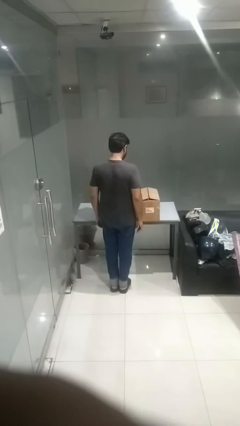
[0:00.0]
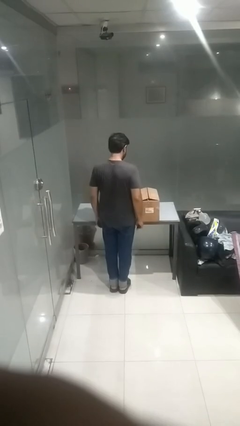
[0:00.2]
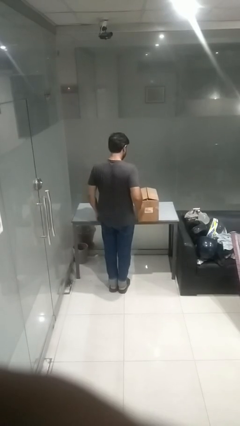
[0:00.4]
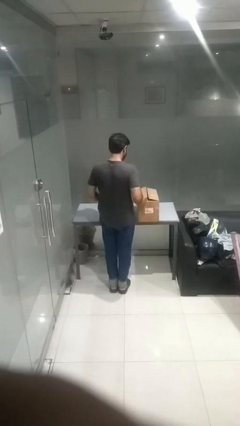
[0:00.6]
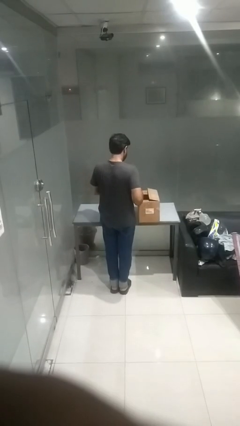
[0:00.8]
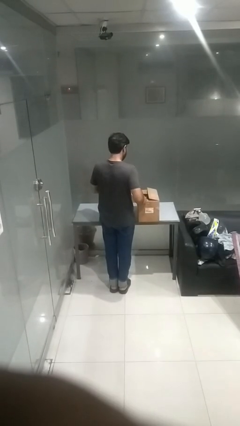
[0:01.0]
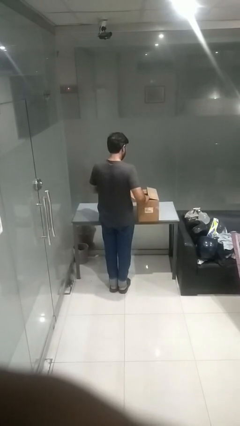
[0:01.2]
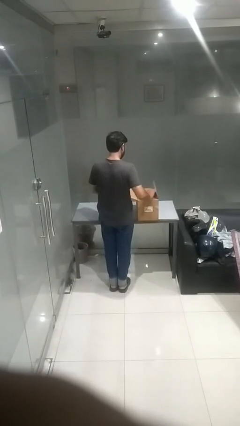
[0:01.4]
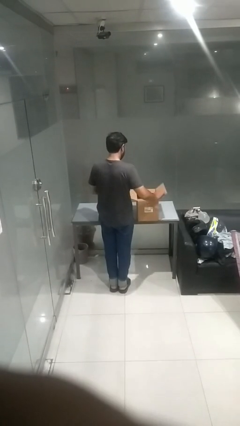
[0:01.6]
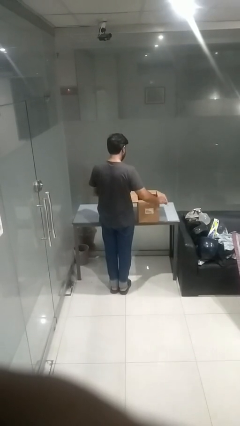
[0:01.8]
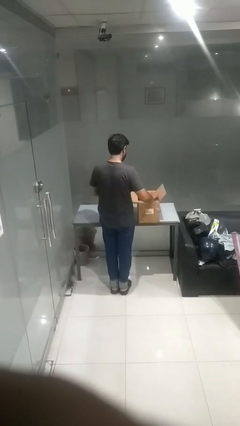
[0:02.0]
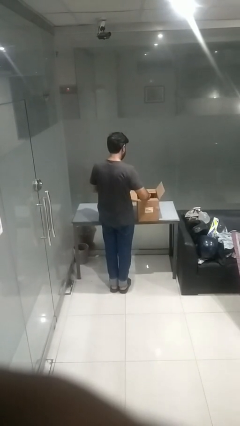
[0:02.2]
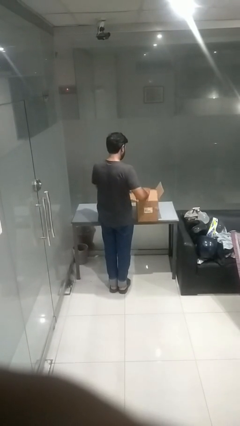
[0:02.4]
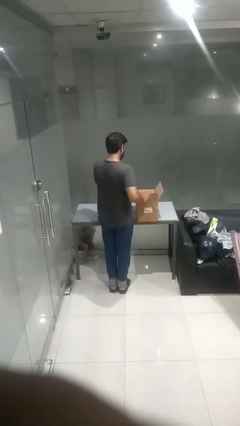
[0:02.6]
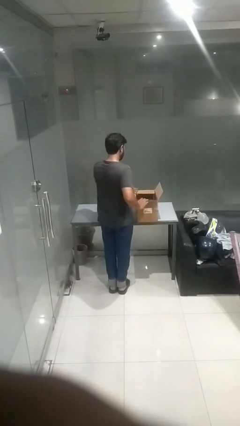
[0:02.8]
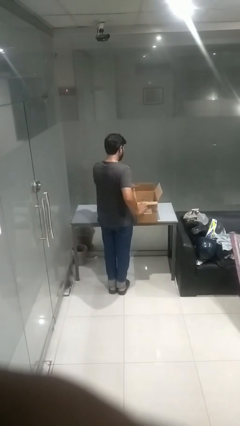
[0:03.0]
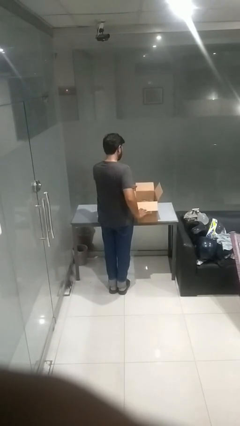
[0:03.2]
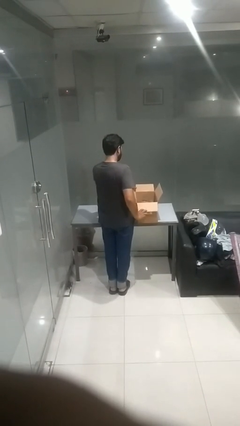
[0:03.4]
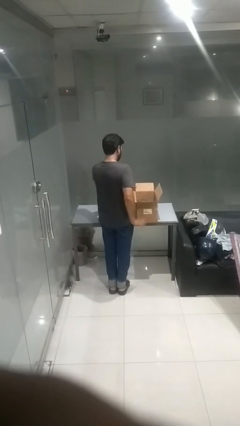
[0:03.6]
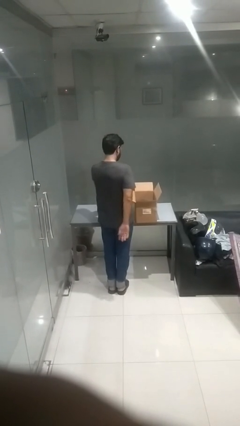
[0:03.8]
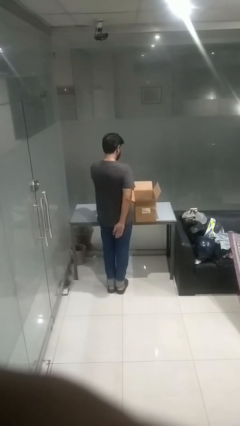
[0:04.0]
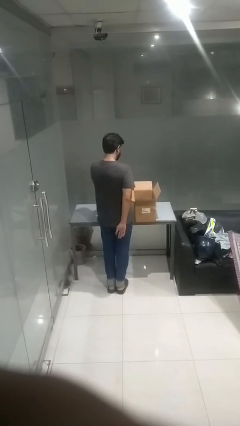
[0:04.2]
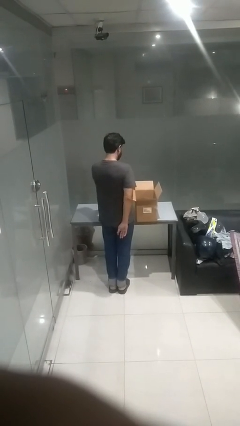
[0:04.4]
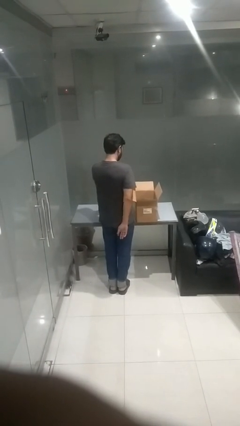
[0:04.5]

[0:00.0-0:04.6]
person opens box

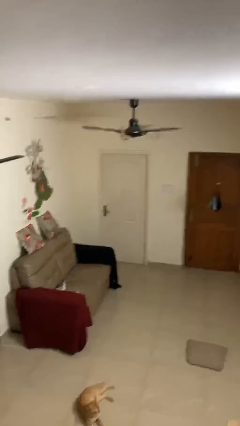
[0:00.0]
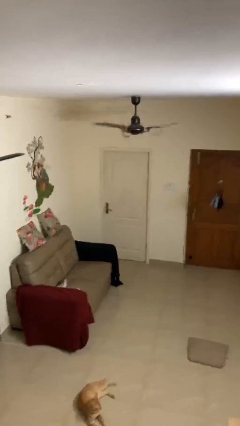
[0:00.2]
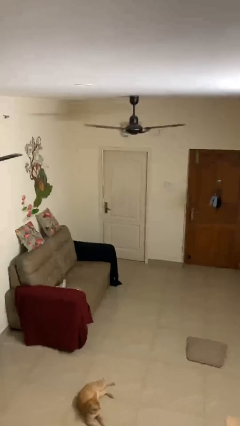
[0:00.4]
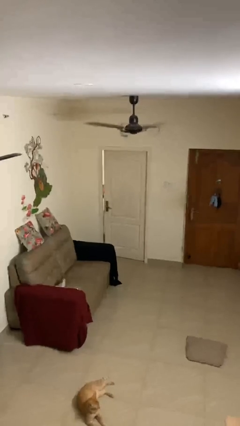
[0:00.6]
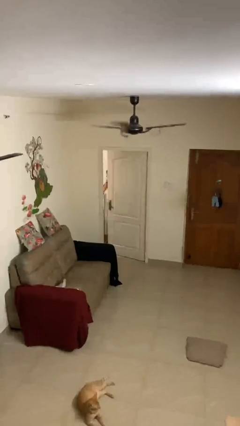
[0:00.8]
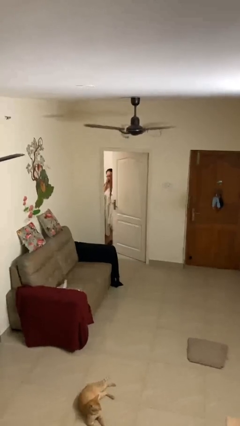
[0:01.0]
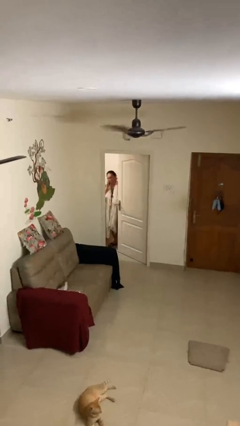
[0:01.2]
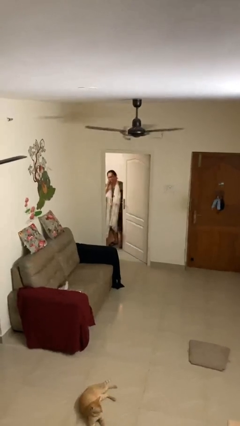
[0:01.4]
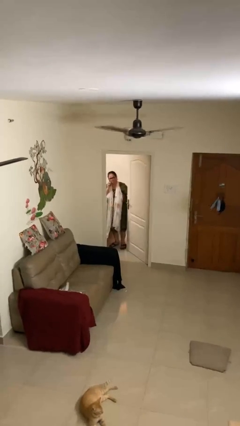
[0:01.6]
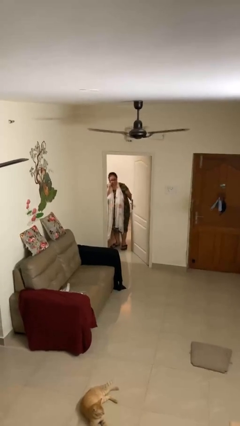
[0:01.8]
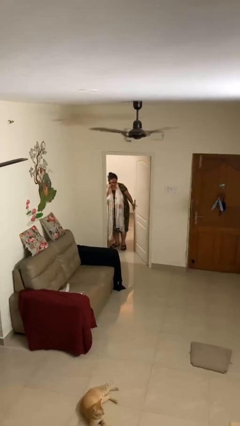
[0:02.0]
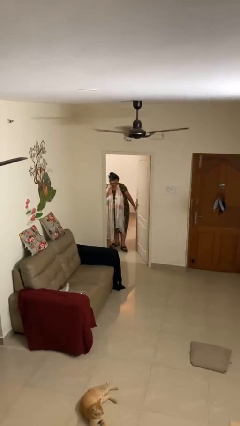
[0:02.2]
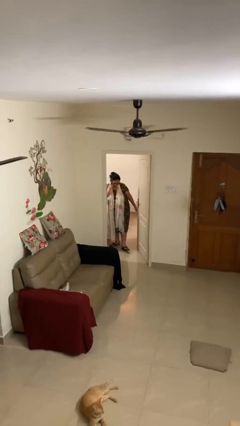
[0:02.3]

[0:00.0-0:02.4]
person opens facility door

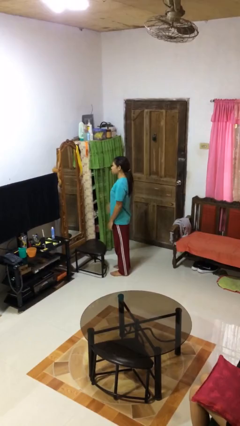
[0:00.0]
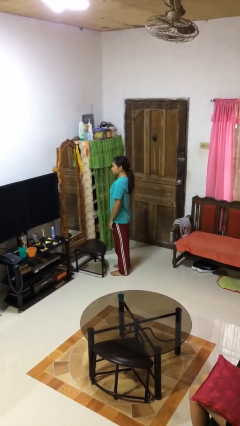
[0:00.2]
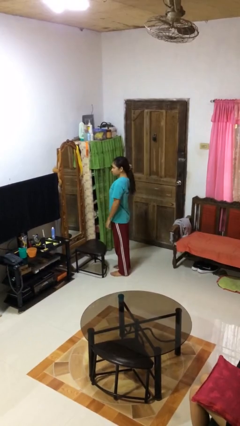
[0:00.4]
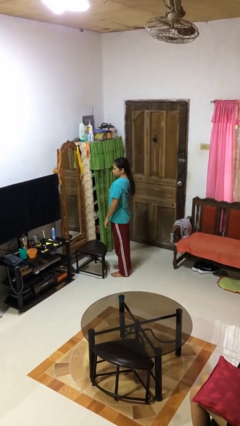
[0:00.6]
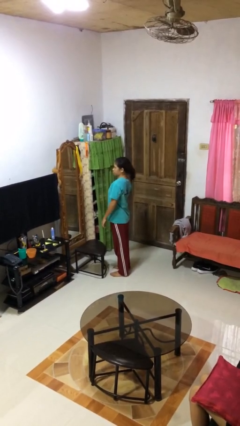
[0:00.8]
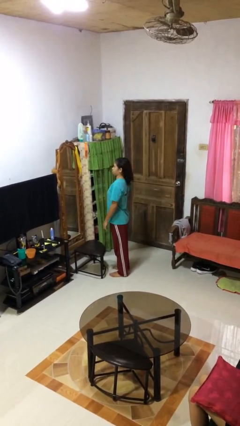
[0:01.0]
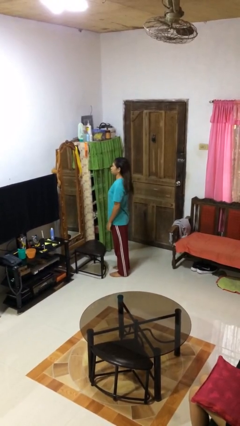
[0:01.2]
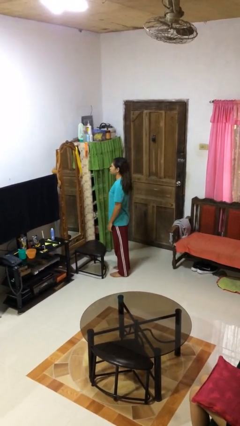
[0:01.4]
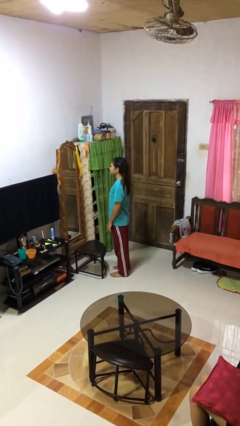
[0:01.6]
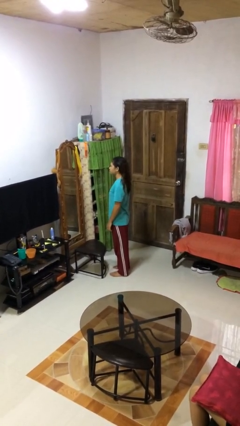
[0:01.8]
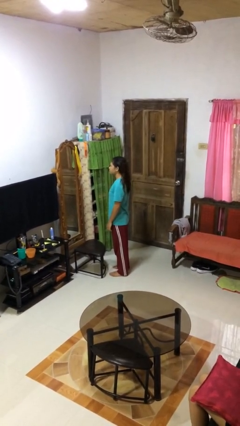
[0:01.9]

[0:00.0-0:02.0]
person takes off hairtie

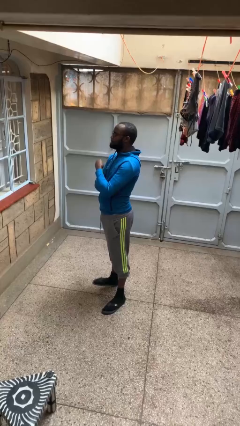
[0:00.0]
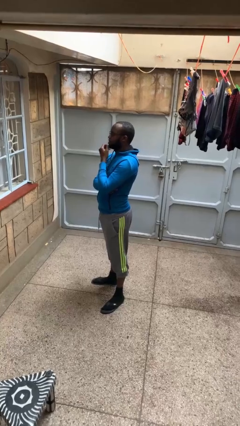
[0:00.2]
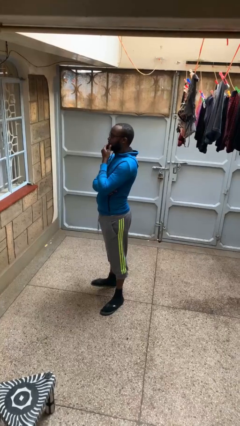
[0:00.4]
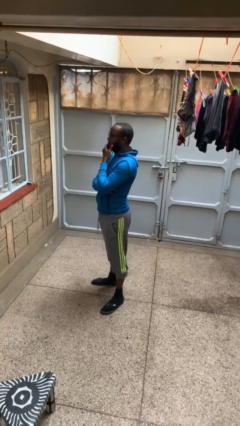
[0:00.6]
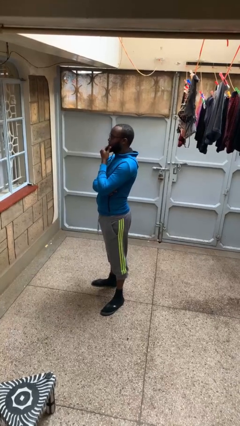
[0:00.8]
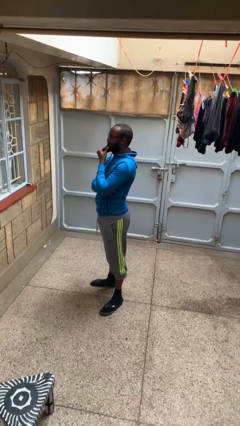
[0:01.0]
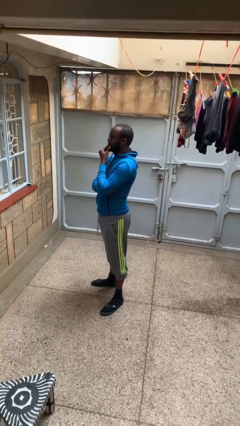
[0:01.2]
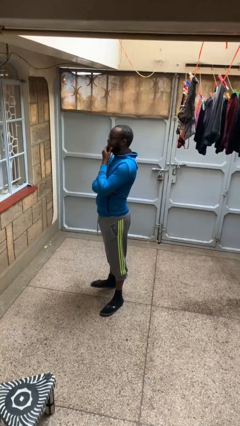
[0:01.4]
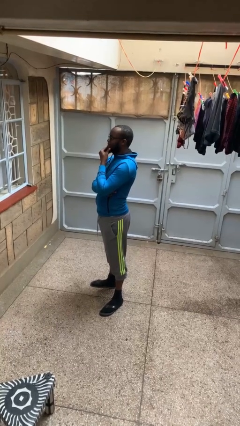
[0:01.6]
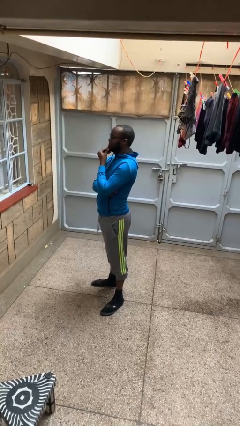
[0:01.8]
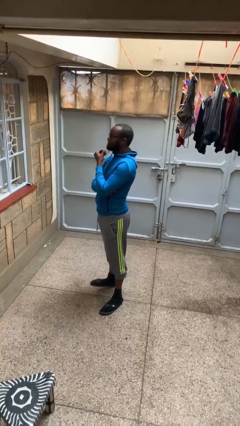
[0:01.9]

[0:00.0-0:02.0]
person strokes chin

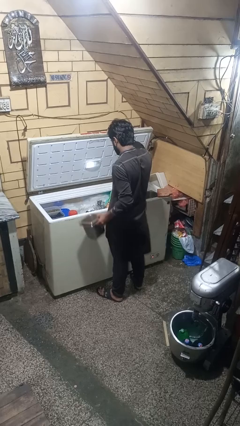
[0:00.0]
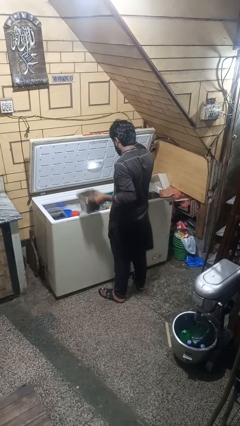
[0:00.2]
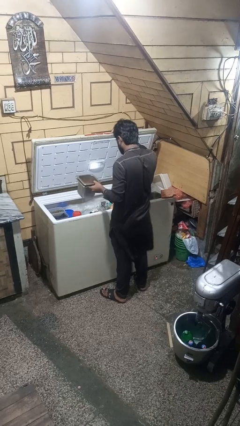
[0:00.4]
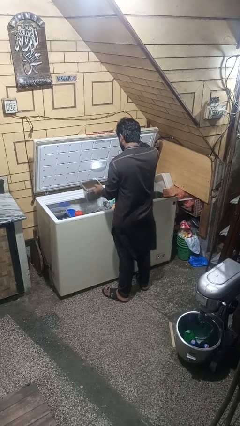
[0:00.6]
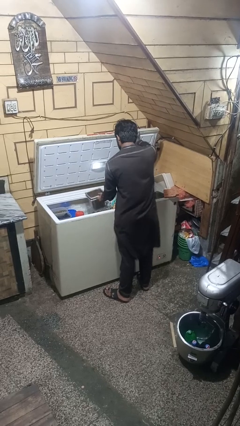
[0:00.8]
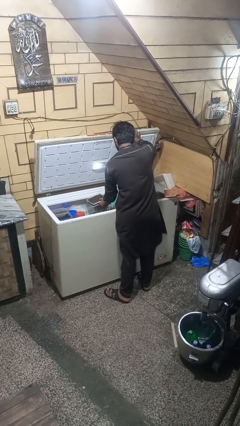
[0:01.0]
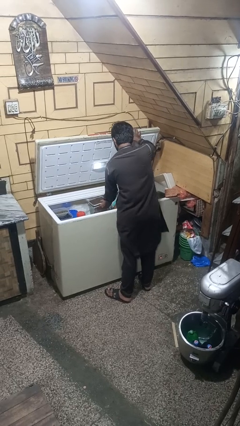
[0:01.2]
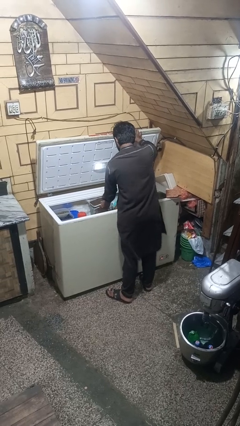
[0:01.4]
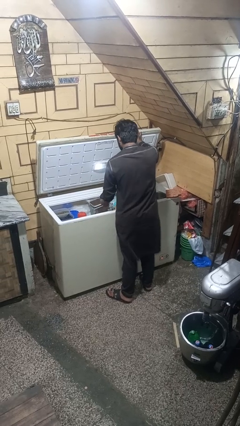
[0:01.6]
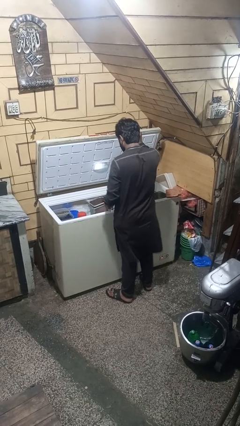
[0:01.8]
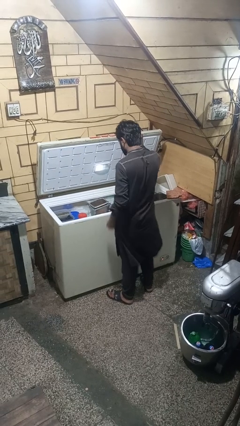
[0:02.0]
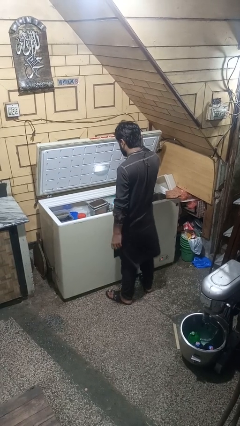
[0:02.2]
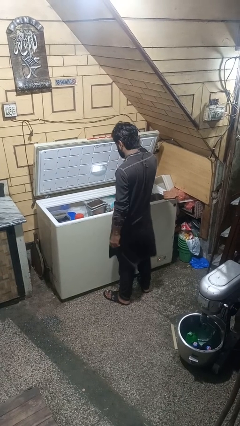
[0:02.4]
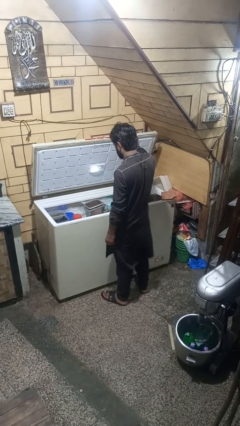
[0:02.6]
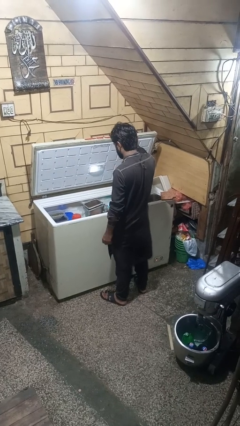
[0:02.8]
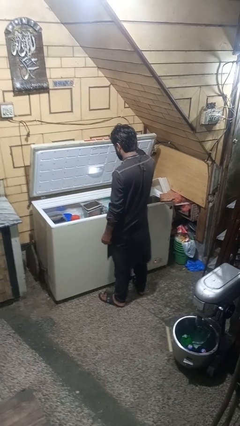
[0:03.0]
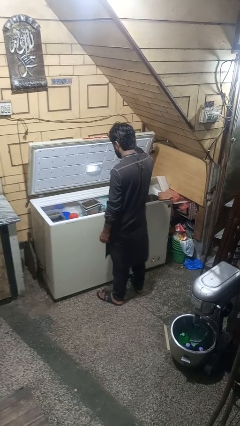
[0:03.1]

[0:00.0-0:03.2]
person puts object into refrigerator

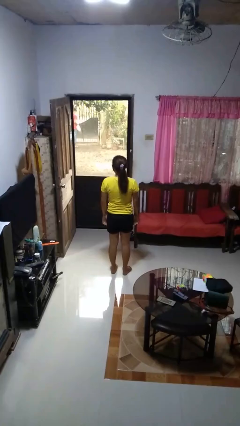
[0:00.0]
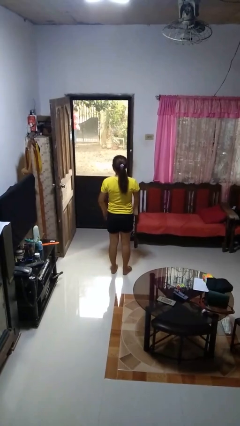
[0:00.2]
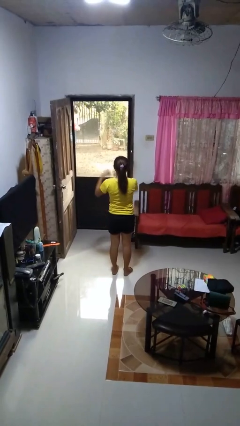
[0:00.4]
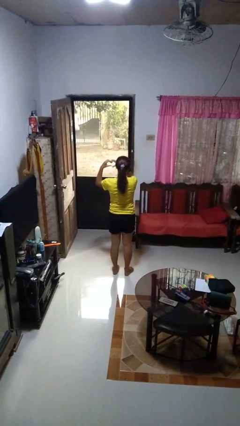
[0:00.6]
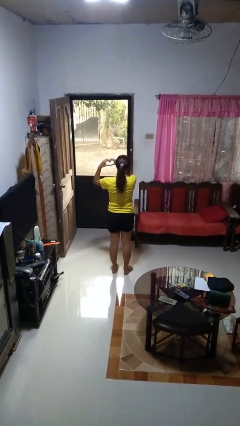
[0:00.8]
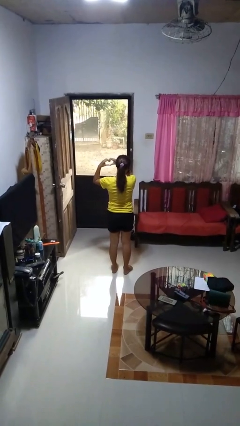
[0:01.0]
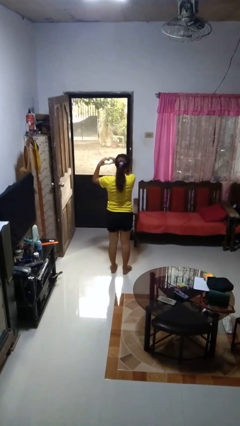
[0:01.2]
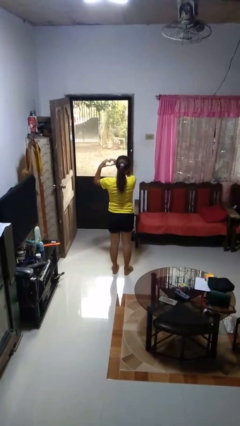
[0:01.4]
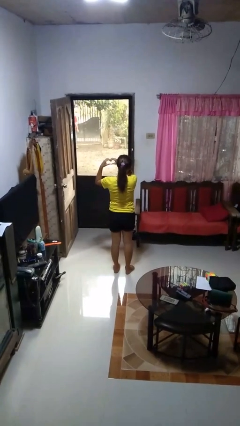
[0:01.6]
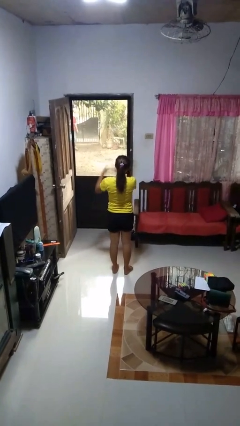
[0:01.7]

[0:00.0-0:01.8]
person gestures heart

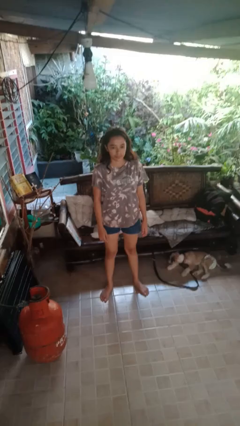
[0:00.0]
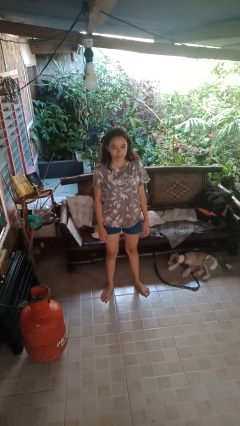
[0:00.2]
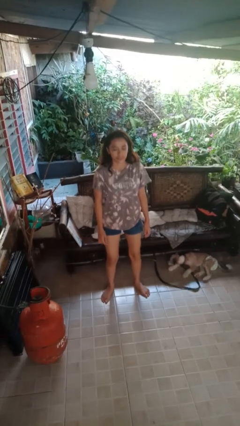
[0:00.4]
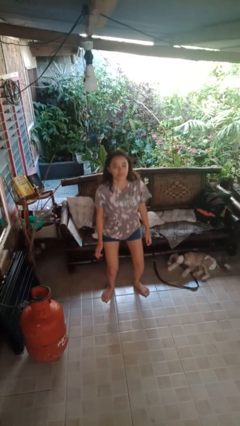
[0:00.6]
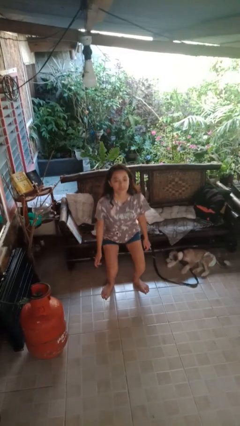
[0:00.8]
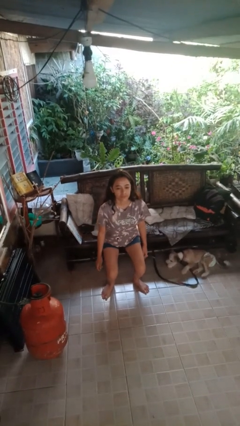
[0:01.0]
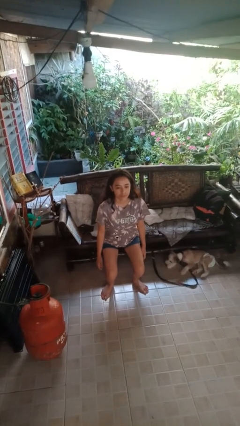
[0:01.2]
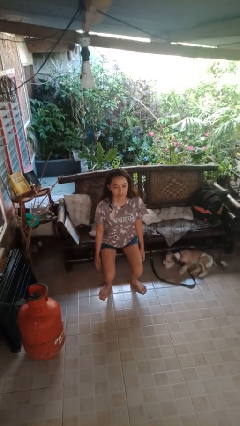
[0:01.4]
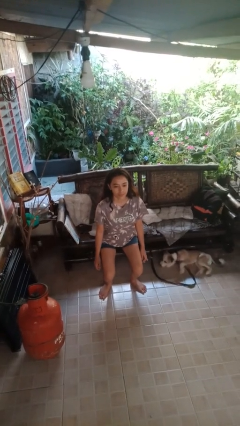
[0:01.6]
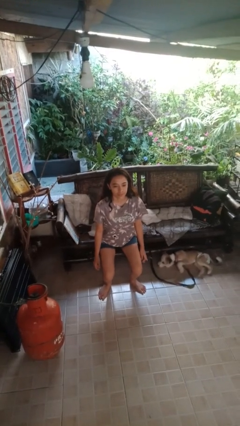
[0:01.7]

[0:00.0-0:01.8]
person squats
